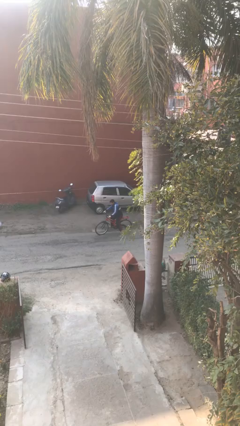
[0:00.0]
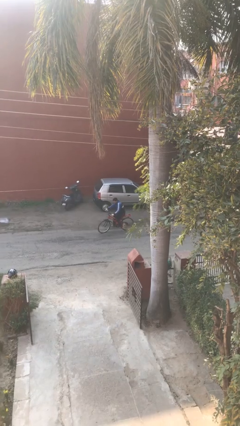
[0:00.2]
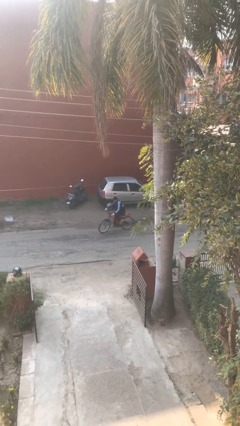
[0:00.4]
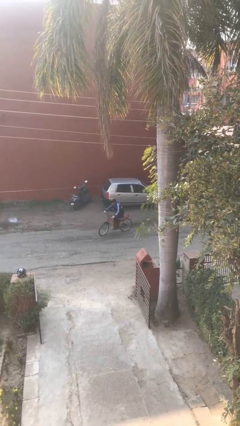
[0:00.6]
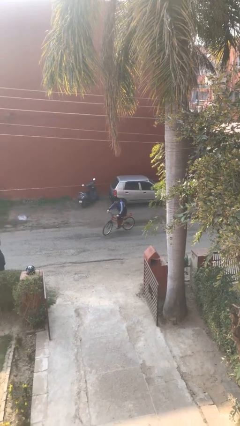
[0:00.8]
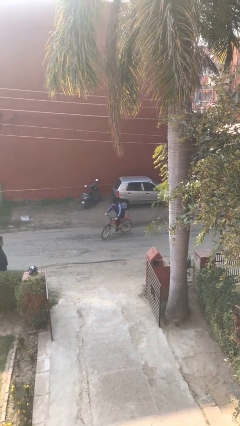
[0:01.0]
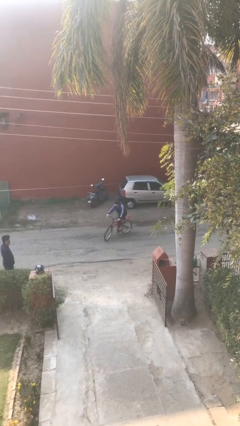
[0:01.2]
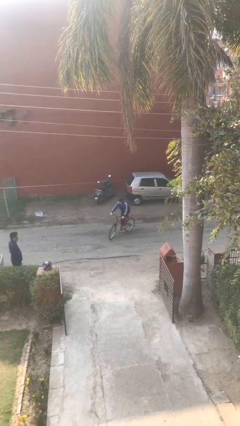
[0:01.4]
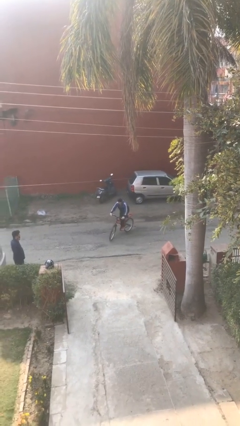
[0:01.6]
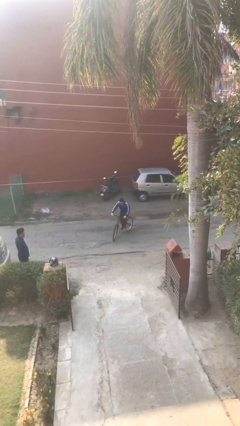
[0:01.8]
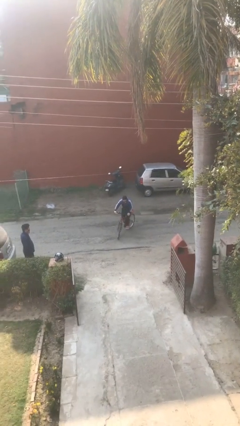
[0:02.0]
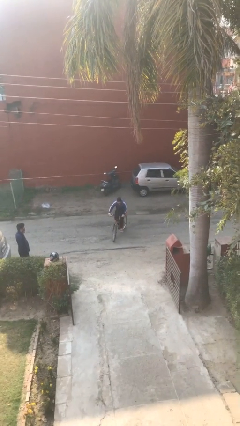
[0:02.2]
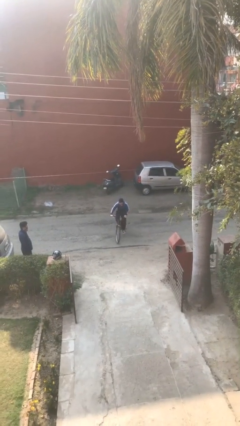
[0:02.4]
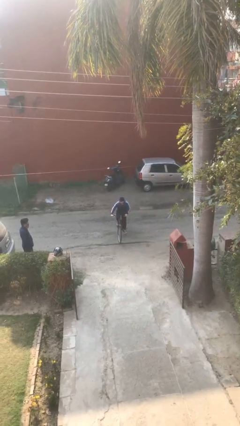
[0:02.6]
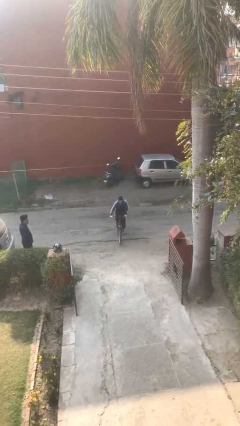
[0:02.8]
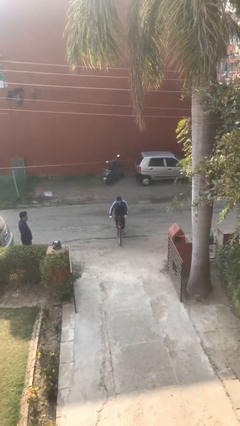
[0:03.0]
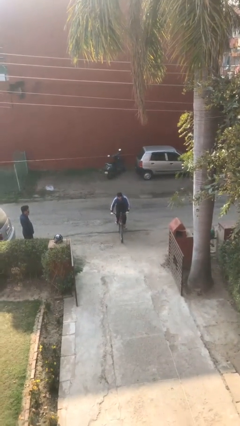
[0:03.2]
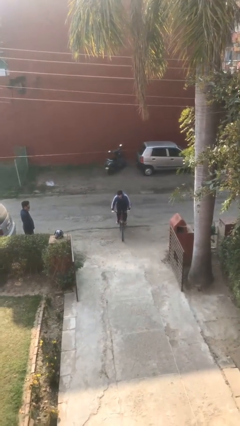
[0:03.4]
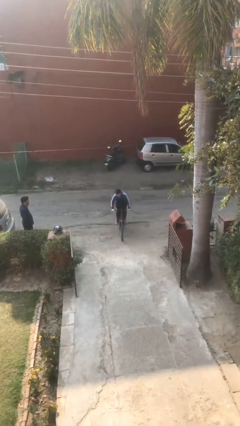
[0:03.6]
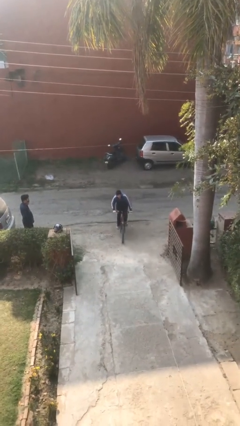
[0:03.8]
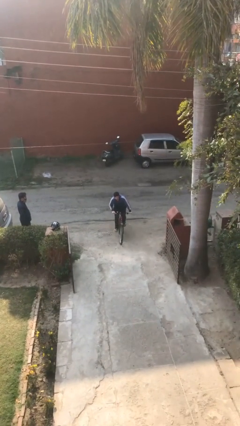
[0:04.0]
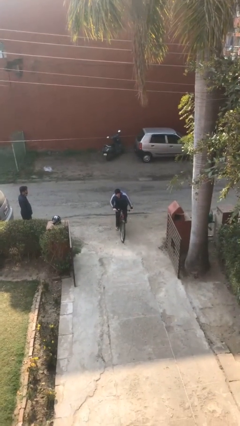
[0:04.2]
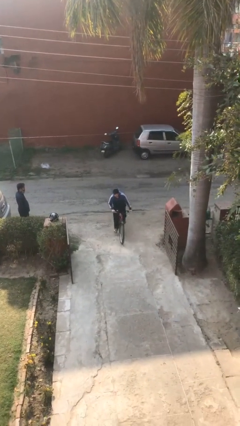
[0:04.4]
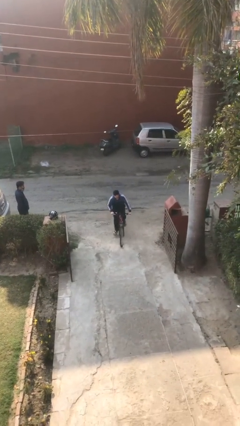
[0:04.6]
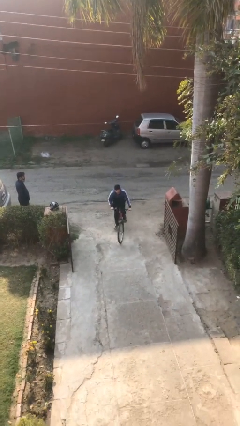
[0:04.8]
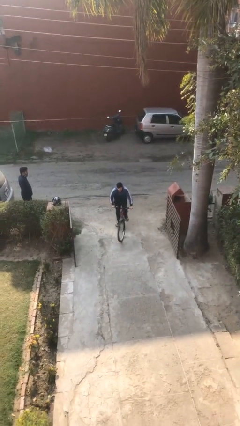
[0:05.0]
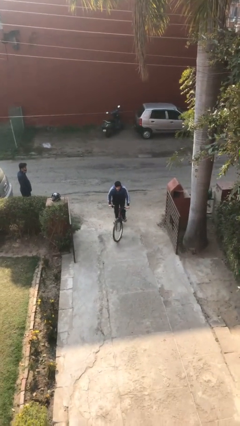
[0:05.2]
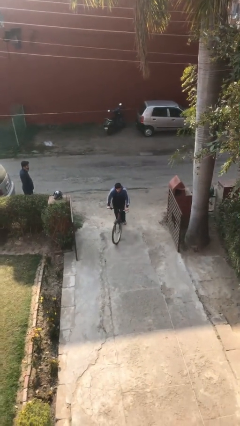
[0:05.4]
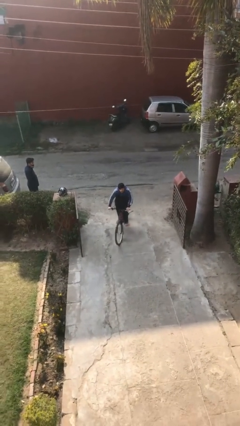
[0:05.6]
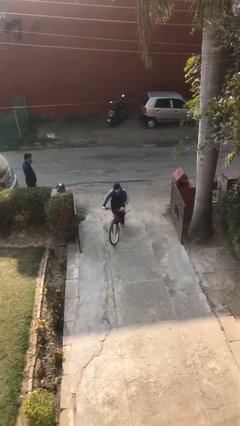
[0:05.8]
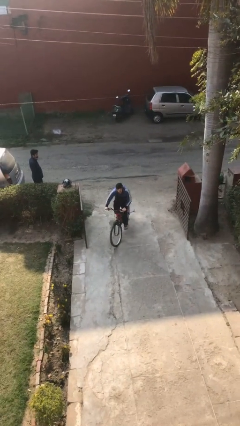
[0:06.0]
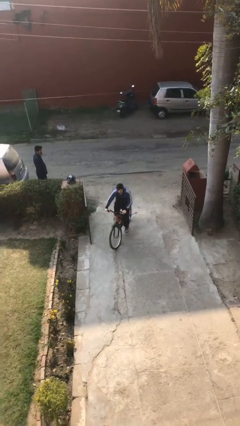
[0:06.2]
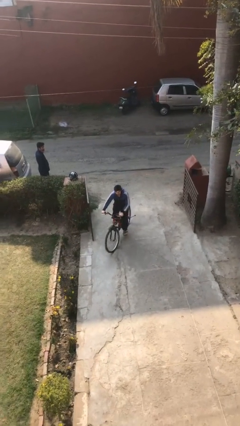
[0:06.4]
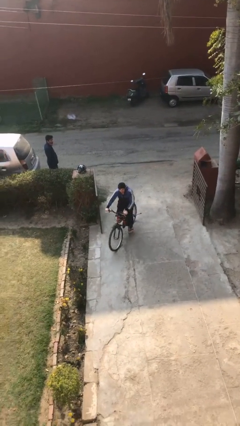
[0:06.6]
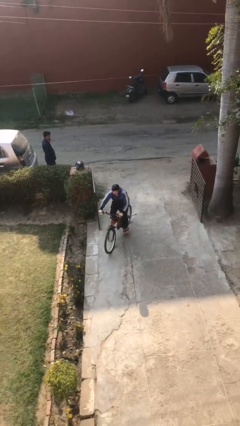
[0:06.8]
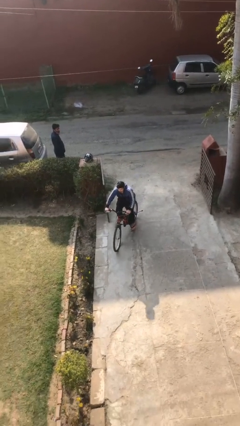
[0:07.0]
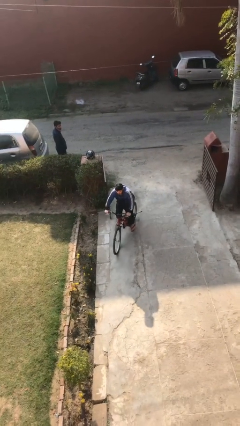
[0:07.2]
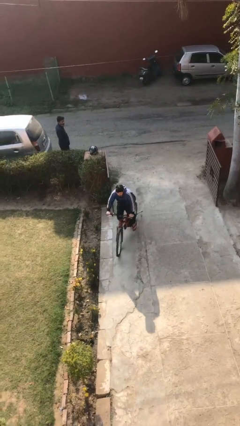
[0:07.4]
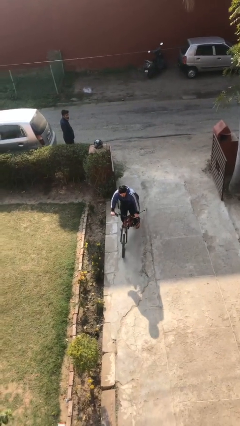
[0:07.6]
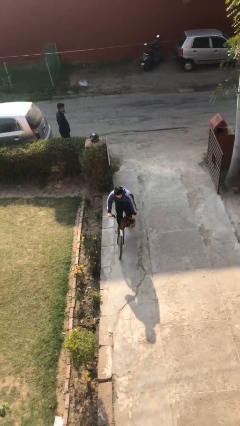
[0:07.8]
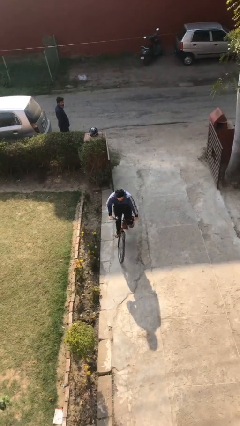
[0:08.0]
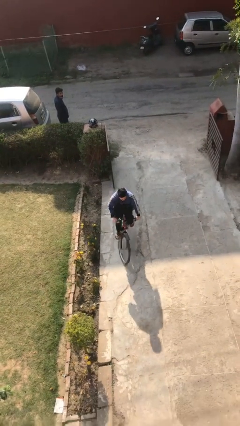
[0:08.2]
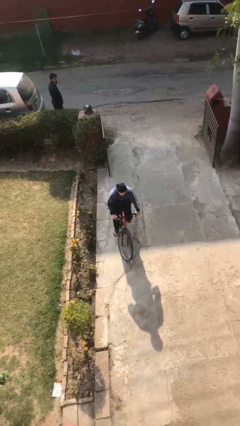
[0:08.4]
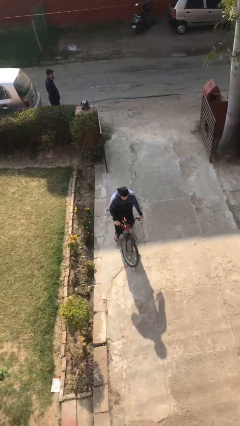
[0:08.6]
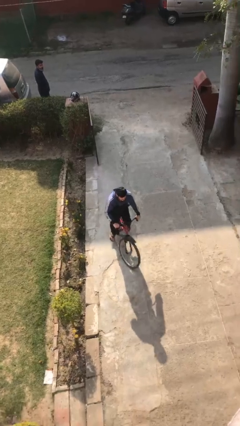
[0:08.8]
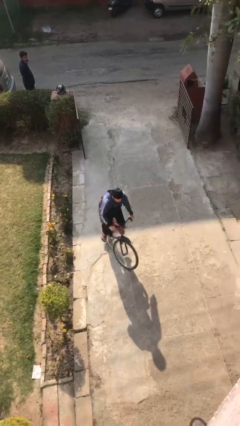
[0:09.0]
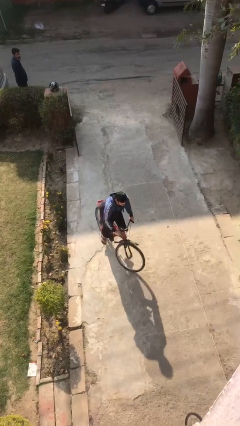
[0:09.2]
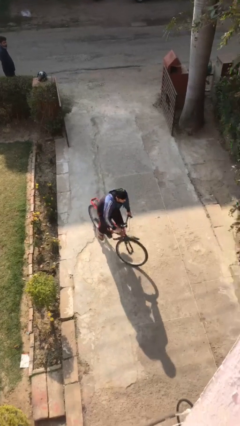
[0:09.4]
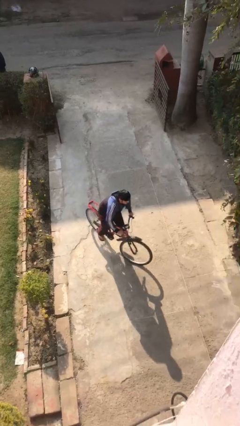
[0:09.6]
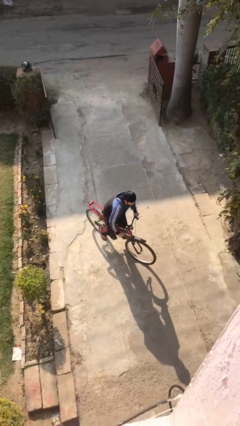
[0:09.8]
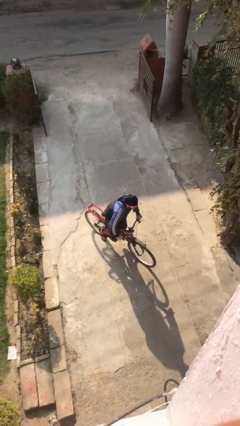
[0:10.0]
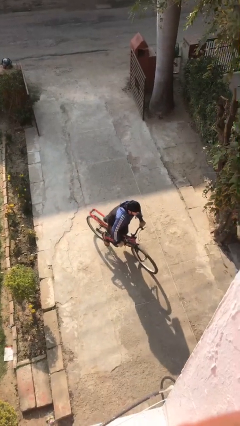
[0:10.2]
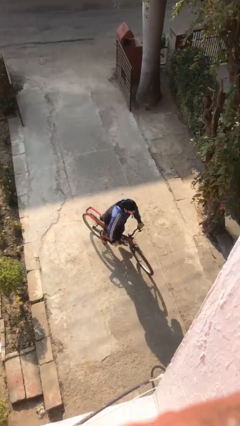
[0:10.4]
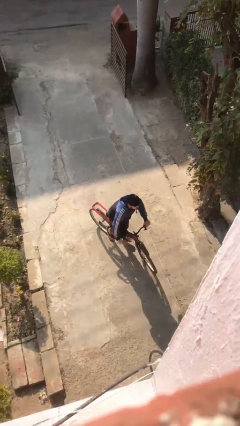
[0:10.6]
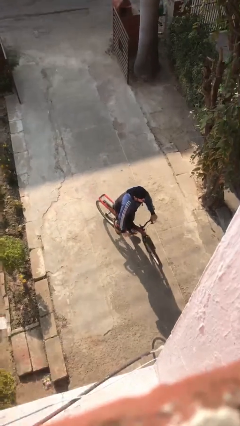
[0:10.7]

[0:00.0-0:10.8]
person rides bicycle

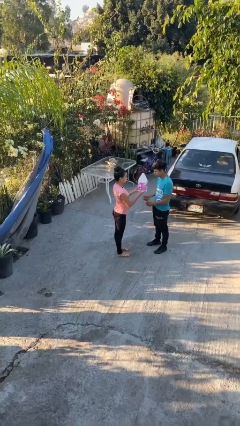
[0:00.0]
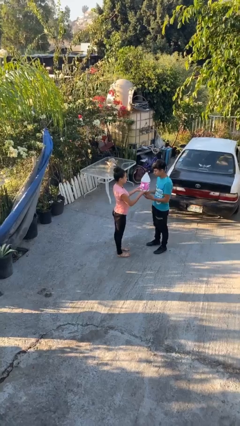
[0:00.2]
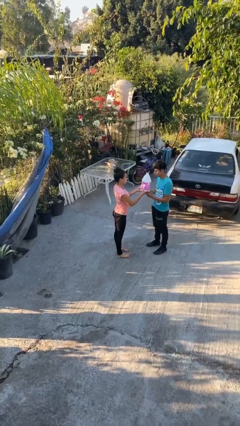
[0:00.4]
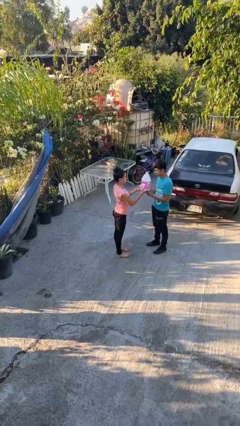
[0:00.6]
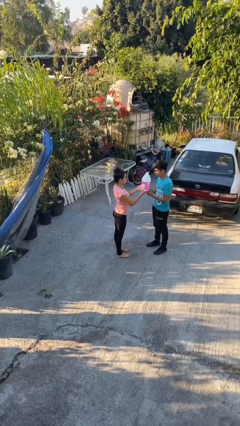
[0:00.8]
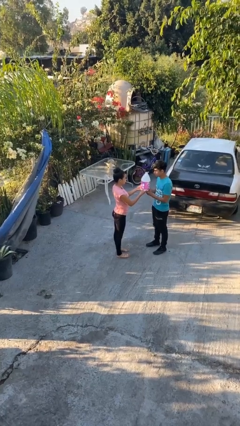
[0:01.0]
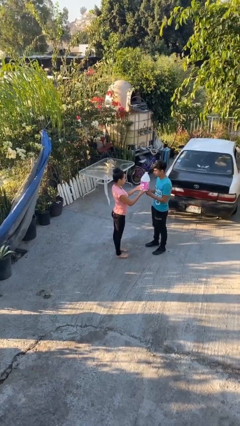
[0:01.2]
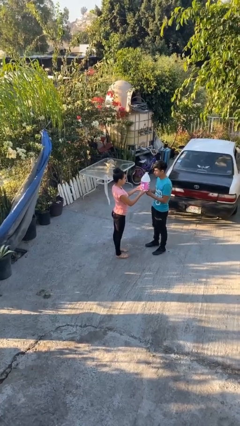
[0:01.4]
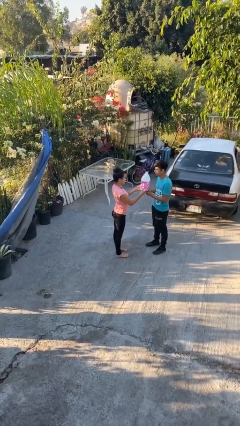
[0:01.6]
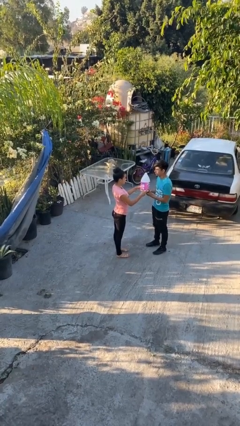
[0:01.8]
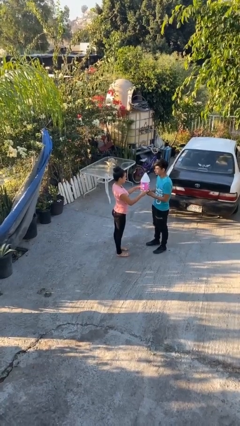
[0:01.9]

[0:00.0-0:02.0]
person transfers object to person

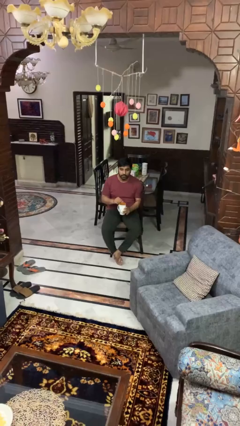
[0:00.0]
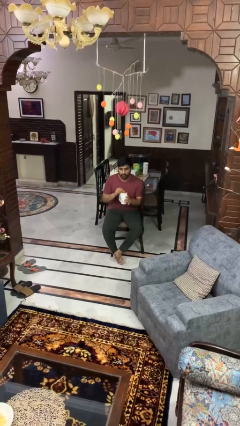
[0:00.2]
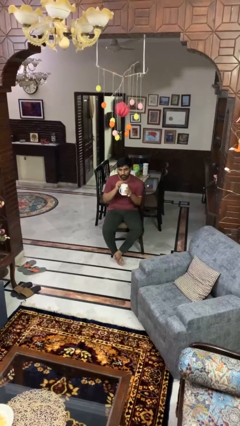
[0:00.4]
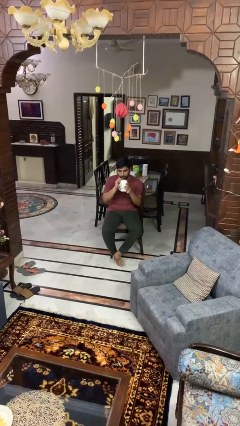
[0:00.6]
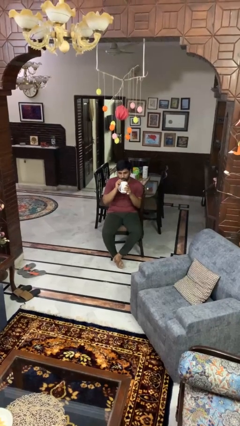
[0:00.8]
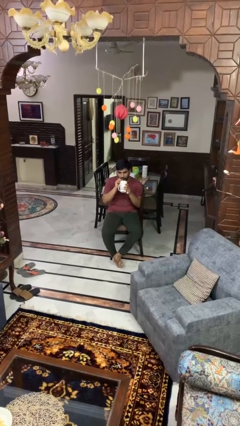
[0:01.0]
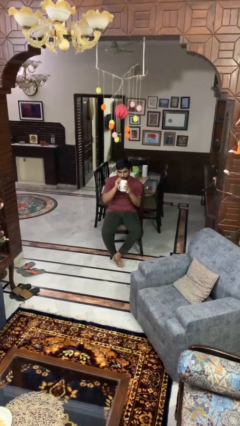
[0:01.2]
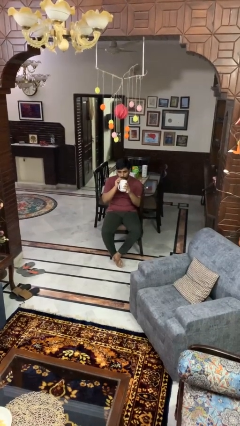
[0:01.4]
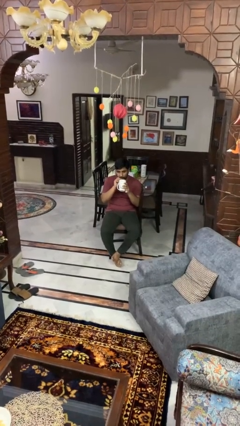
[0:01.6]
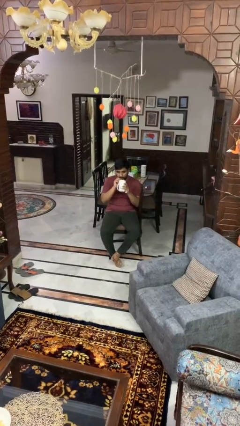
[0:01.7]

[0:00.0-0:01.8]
person drinks from straw

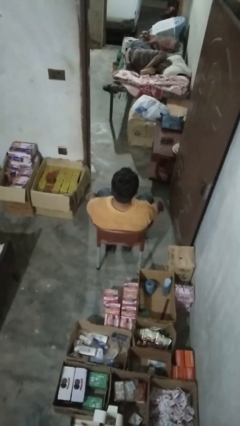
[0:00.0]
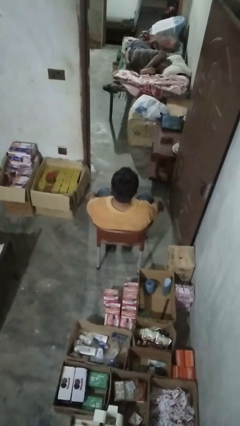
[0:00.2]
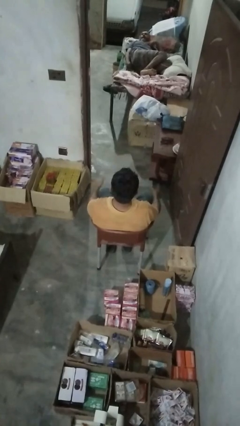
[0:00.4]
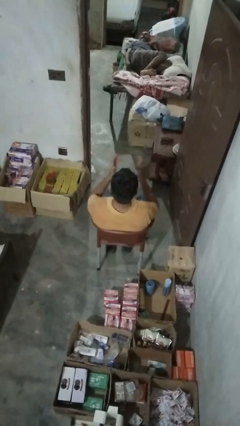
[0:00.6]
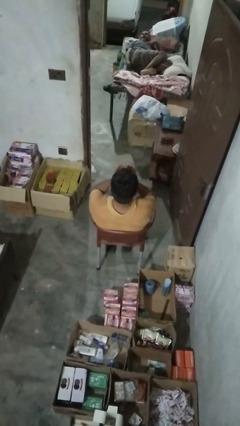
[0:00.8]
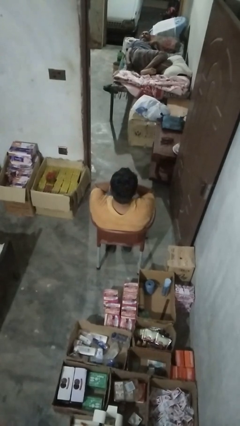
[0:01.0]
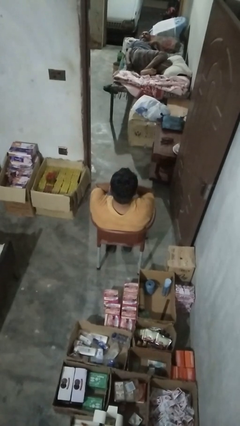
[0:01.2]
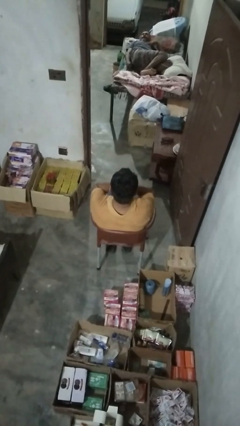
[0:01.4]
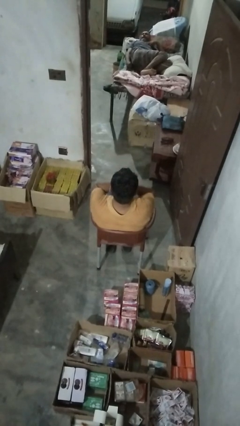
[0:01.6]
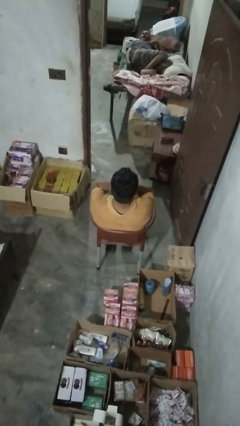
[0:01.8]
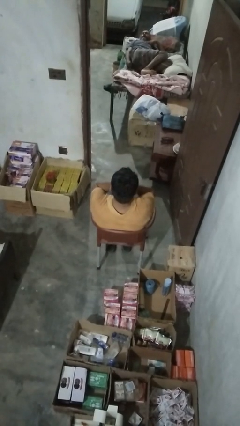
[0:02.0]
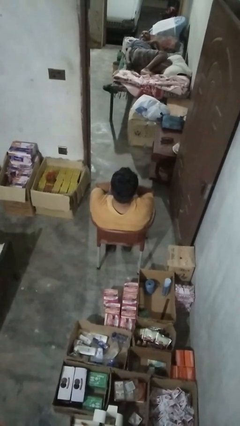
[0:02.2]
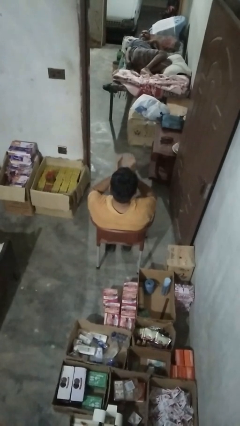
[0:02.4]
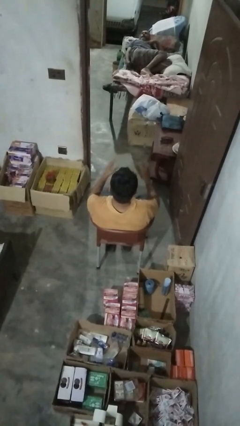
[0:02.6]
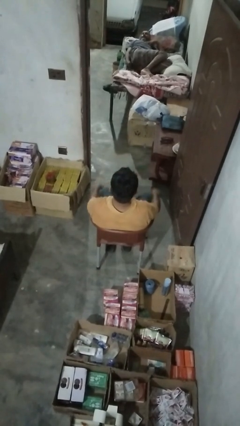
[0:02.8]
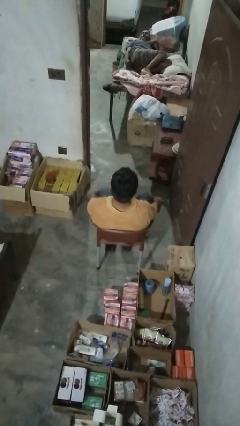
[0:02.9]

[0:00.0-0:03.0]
person covers face with hands
